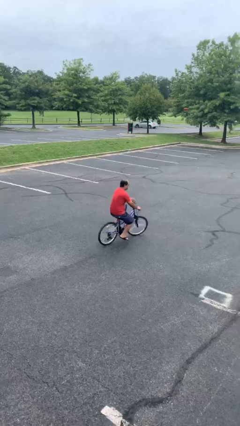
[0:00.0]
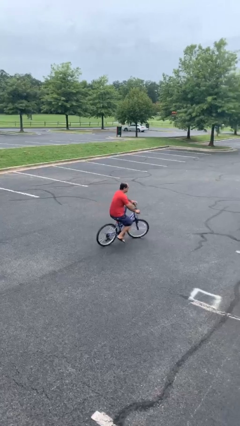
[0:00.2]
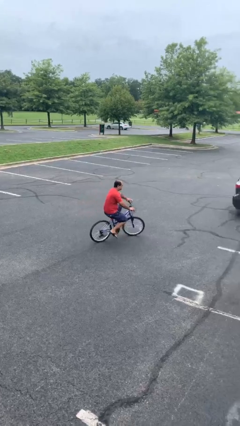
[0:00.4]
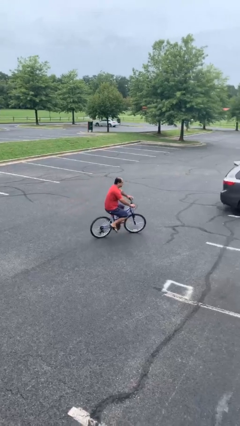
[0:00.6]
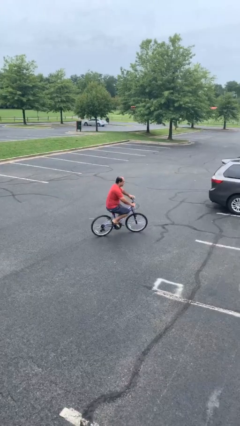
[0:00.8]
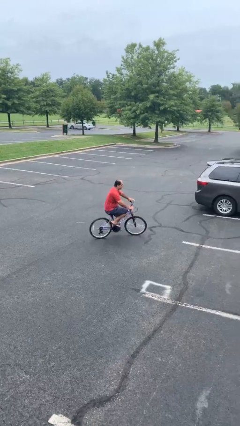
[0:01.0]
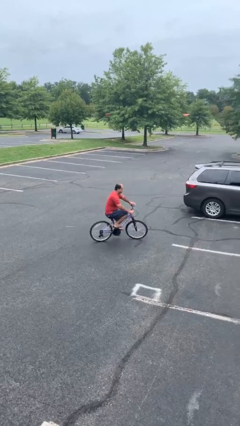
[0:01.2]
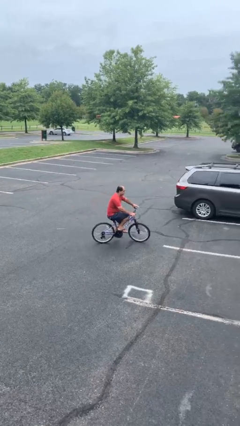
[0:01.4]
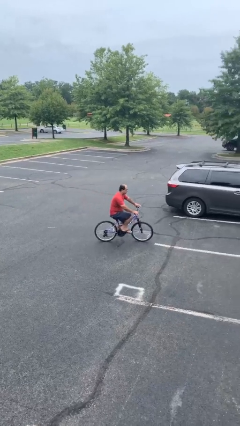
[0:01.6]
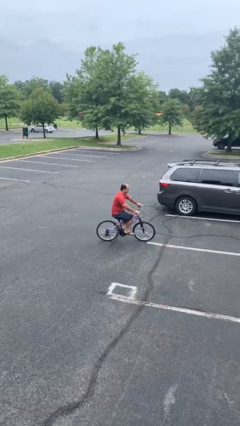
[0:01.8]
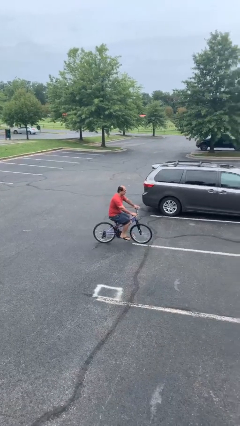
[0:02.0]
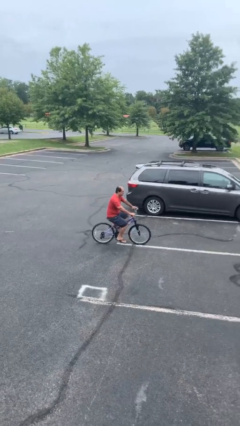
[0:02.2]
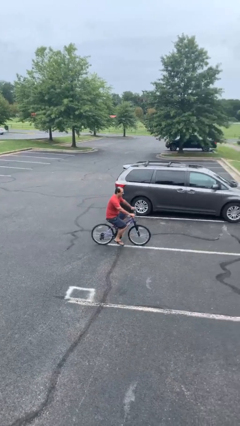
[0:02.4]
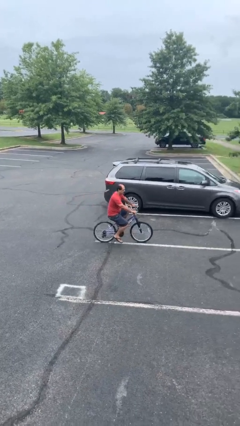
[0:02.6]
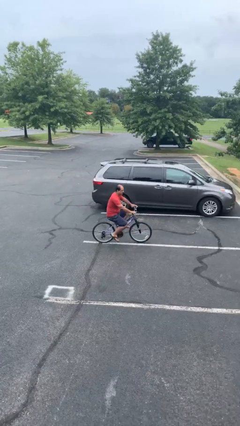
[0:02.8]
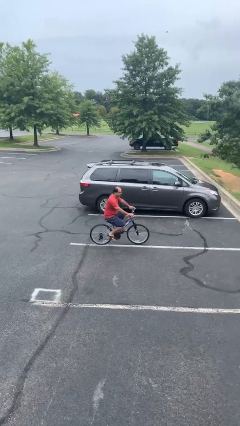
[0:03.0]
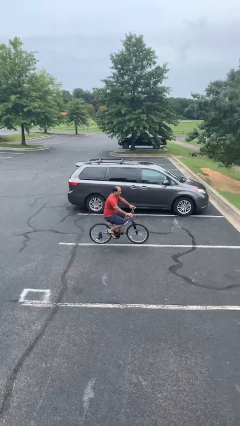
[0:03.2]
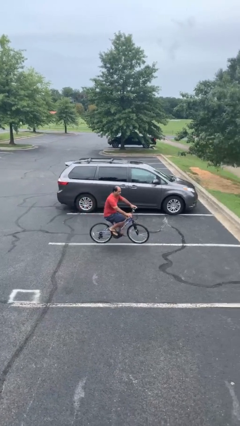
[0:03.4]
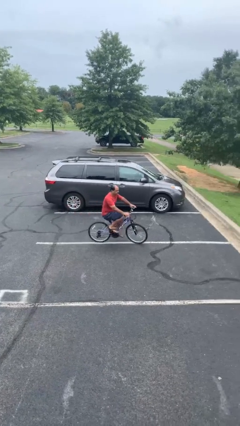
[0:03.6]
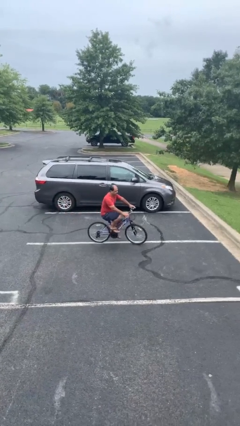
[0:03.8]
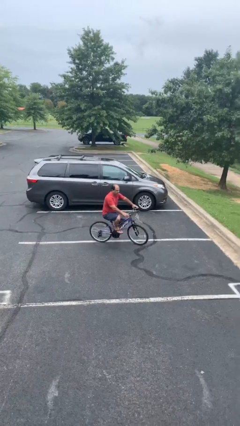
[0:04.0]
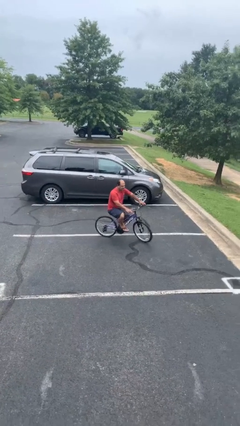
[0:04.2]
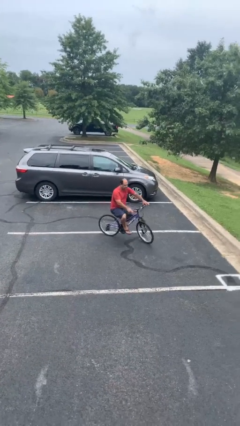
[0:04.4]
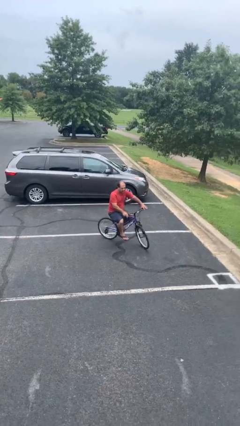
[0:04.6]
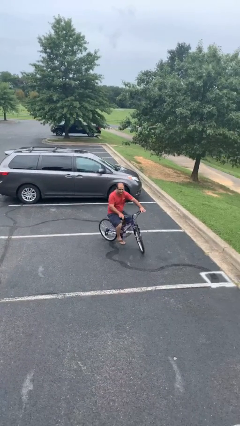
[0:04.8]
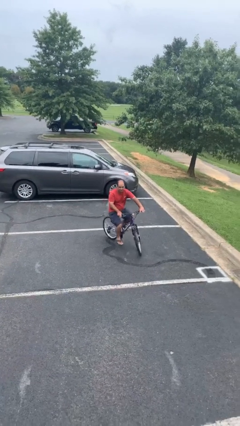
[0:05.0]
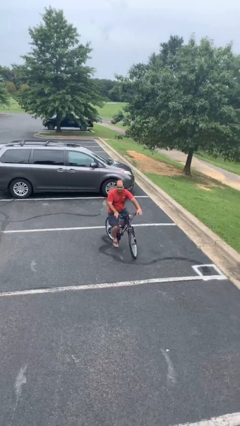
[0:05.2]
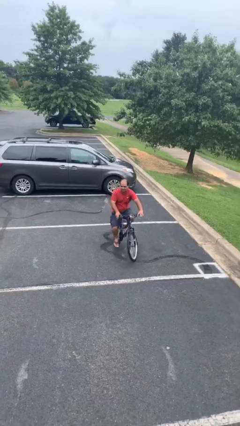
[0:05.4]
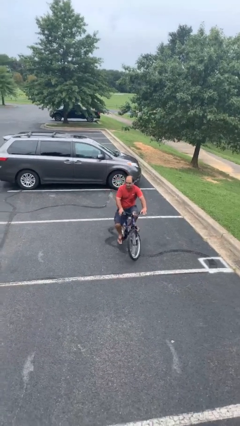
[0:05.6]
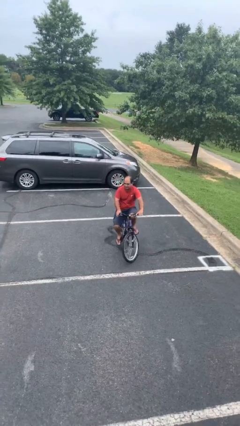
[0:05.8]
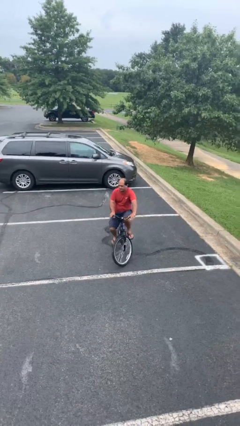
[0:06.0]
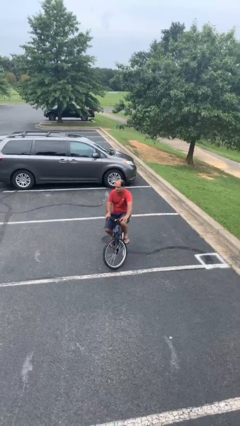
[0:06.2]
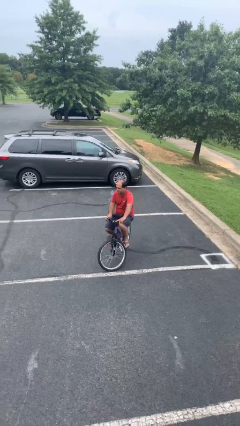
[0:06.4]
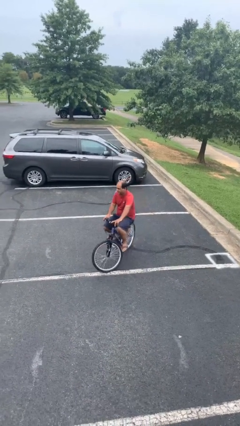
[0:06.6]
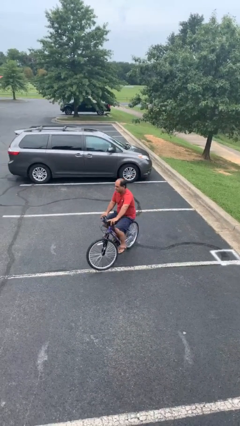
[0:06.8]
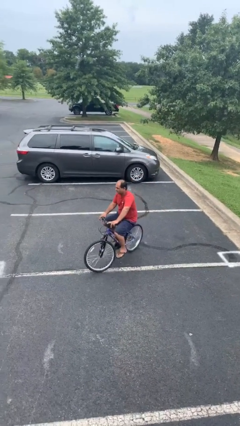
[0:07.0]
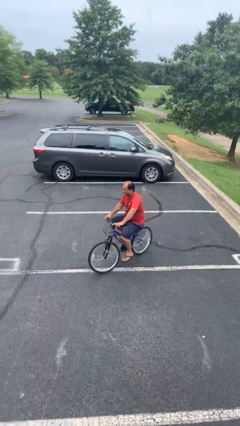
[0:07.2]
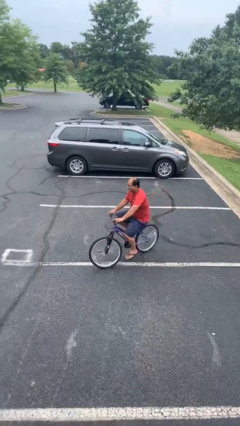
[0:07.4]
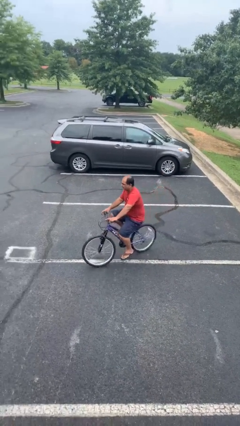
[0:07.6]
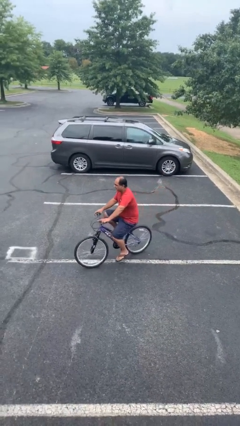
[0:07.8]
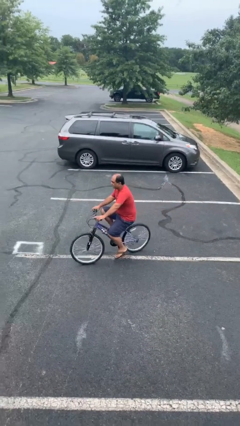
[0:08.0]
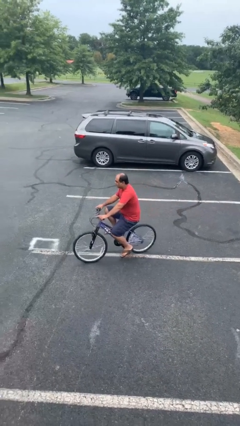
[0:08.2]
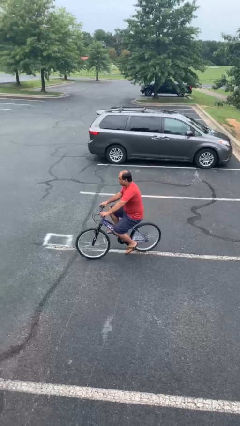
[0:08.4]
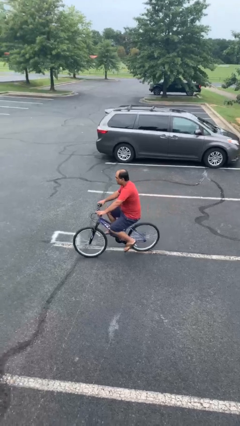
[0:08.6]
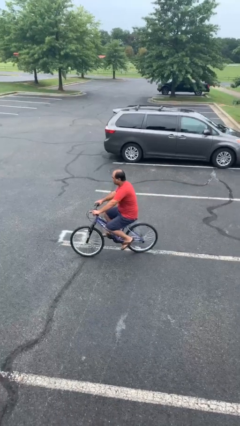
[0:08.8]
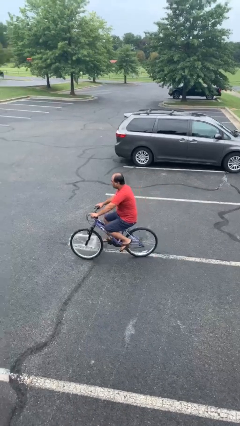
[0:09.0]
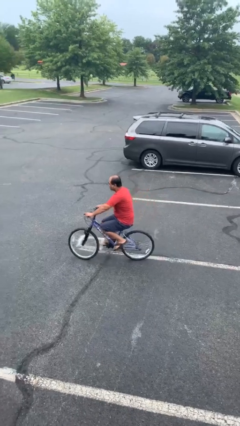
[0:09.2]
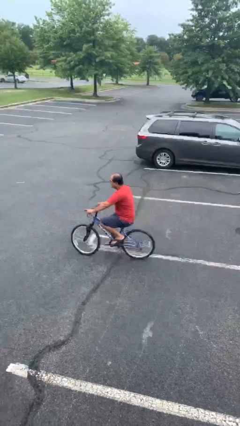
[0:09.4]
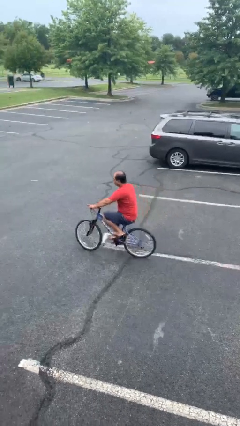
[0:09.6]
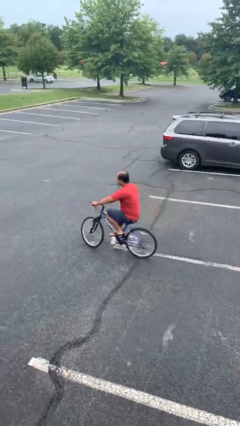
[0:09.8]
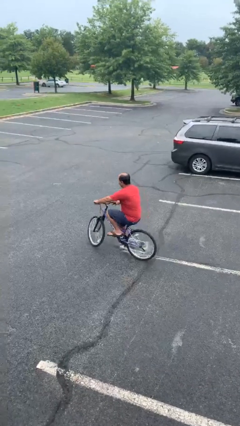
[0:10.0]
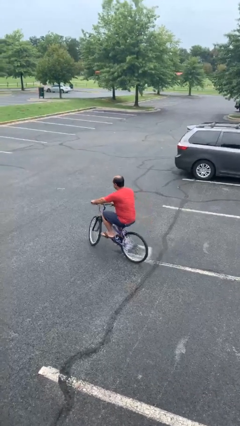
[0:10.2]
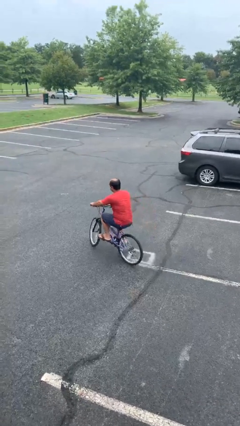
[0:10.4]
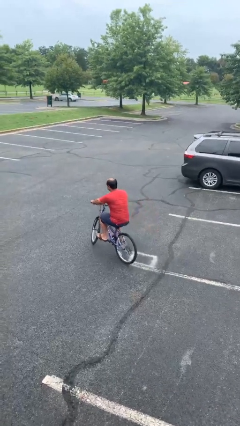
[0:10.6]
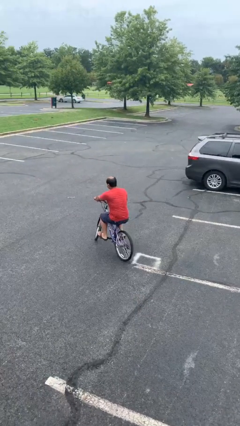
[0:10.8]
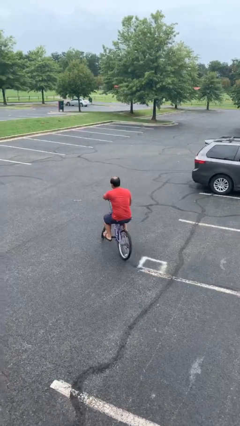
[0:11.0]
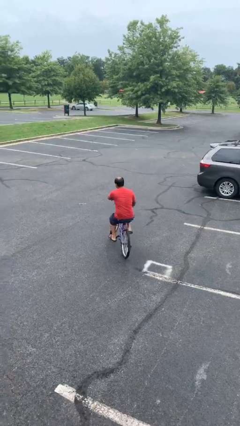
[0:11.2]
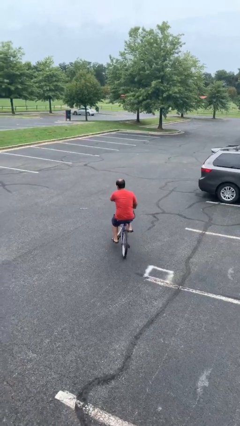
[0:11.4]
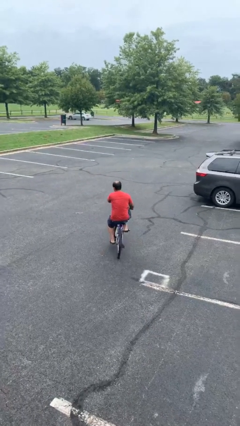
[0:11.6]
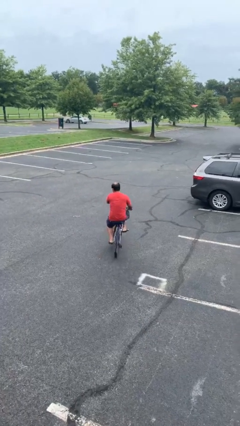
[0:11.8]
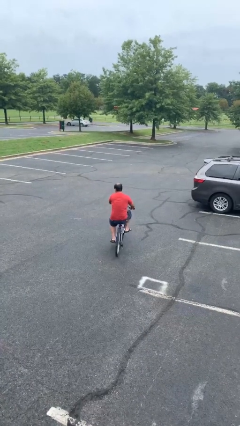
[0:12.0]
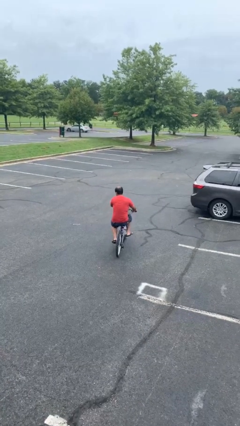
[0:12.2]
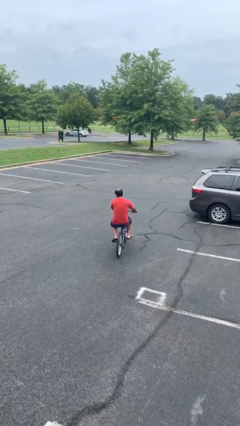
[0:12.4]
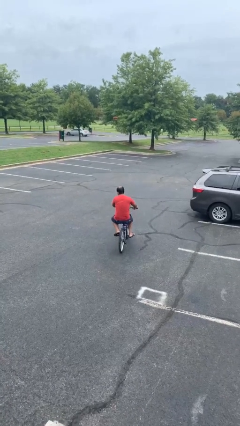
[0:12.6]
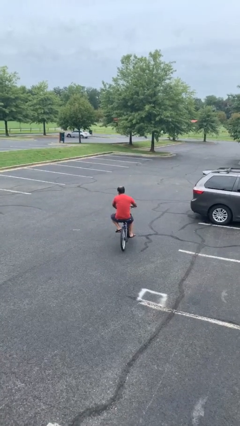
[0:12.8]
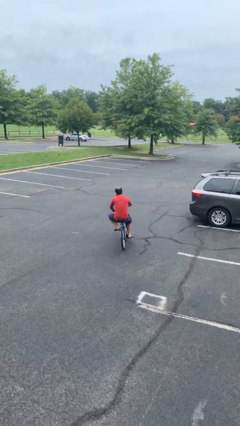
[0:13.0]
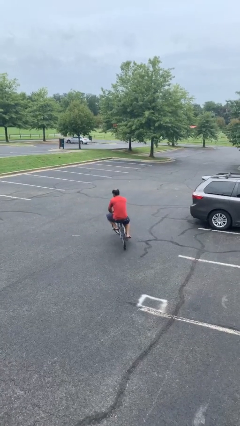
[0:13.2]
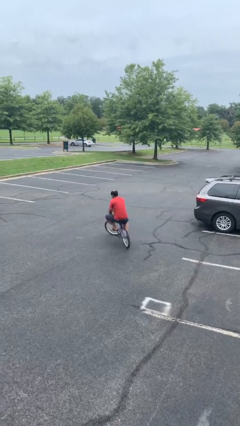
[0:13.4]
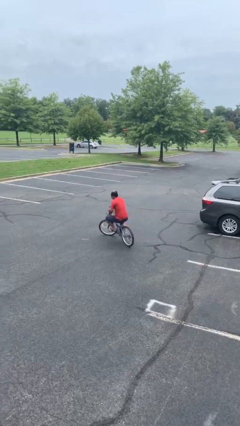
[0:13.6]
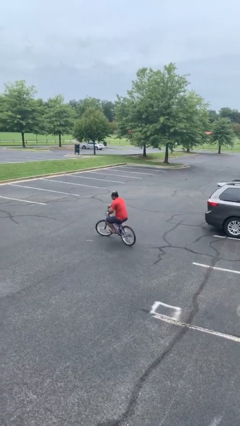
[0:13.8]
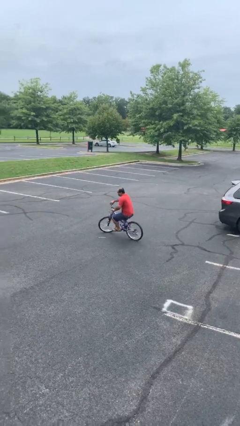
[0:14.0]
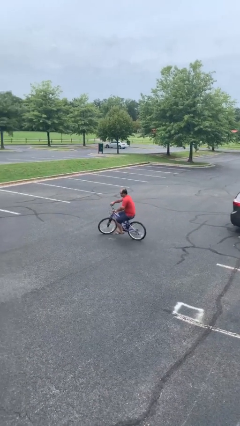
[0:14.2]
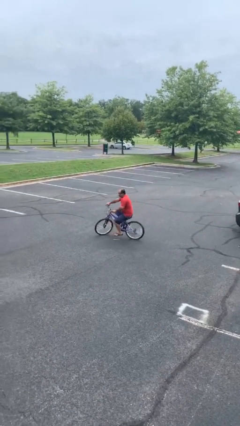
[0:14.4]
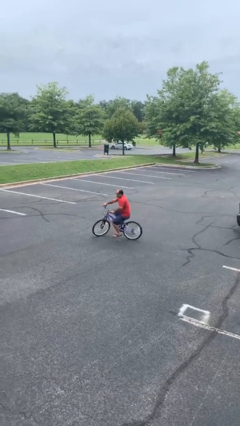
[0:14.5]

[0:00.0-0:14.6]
person rides bicycle

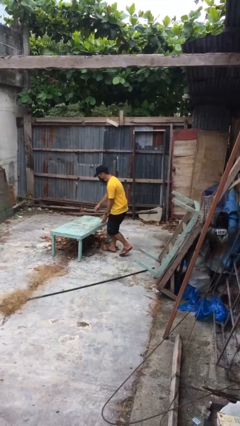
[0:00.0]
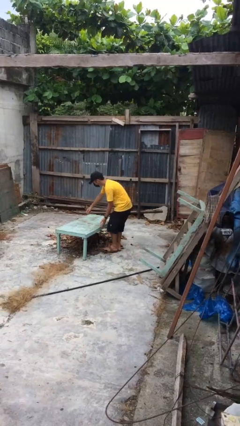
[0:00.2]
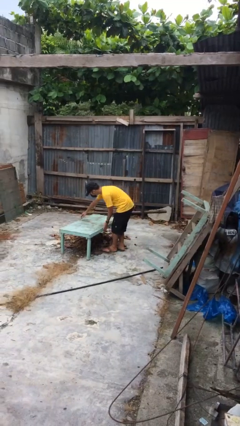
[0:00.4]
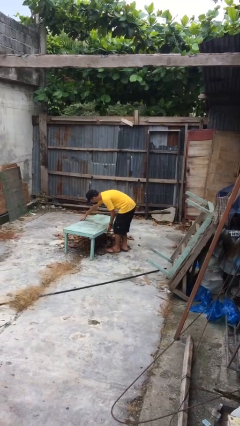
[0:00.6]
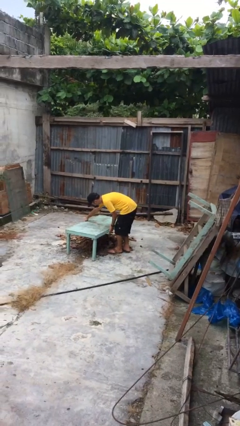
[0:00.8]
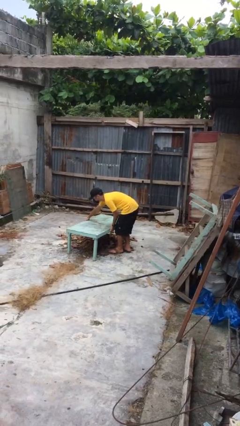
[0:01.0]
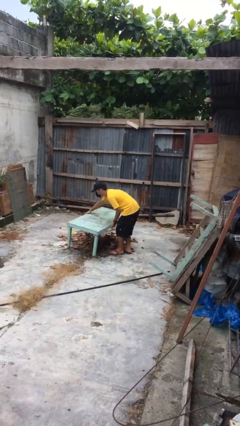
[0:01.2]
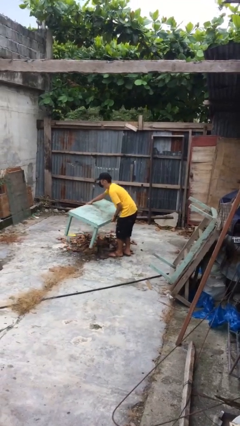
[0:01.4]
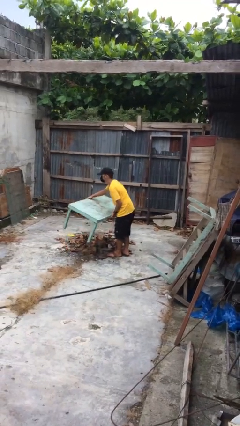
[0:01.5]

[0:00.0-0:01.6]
person picks up object from floor

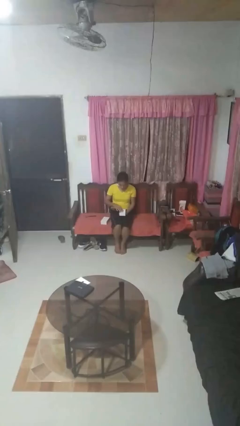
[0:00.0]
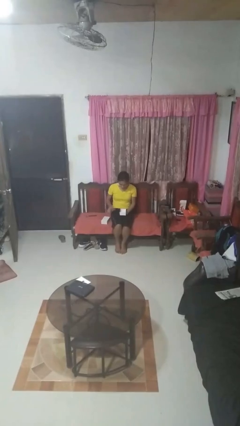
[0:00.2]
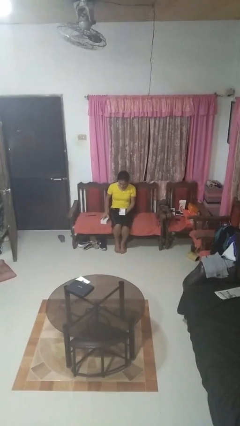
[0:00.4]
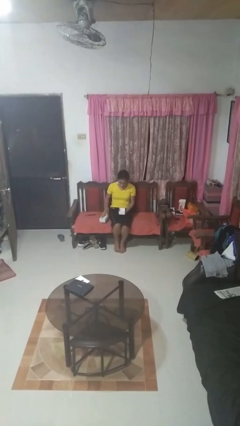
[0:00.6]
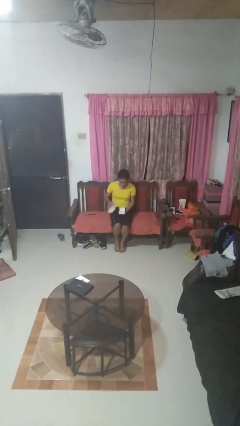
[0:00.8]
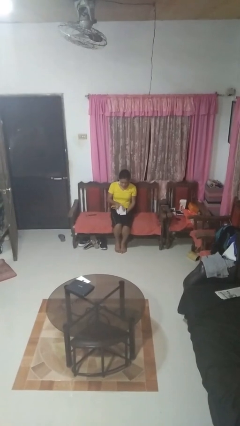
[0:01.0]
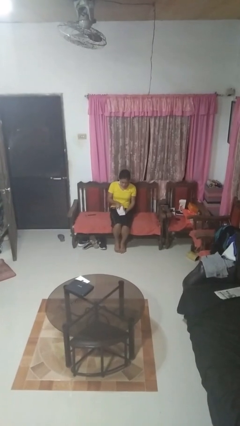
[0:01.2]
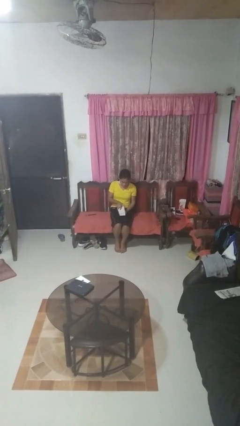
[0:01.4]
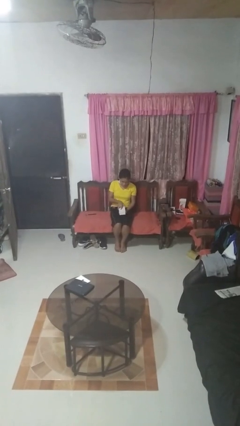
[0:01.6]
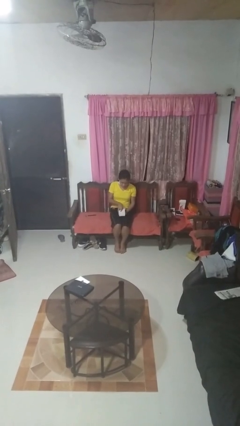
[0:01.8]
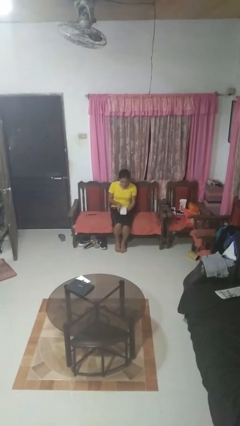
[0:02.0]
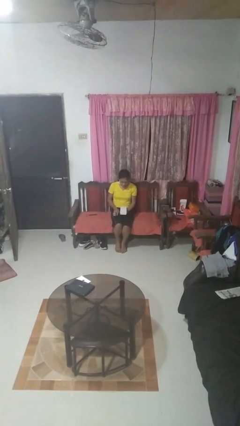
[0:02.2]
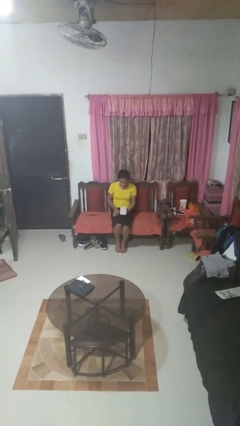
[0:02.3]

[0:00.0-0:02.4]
person closes jewelry box
